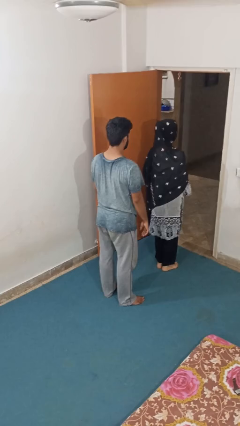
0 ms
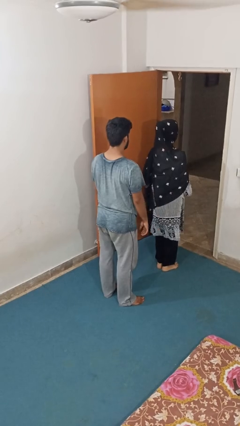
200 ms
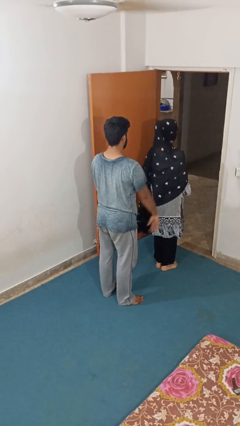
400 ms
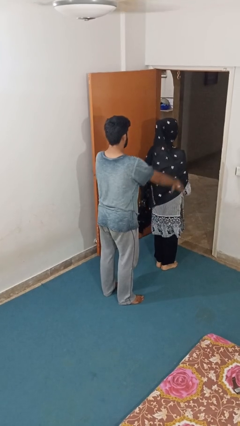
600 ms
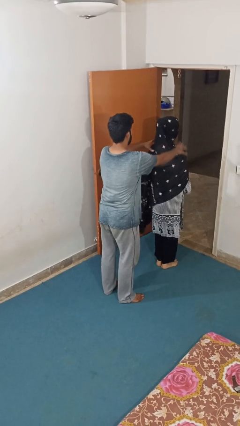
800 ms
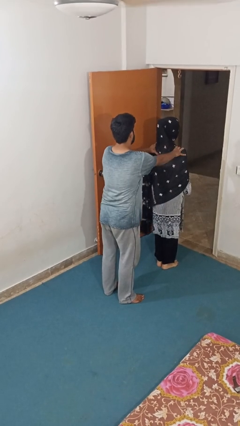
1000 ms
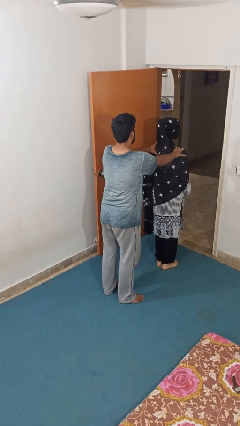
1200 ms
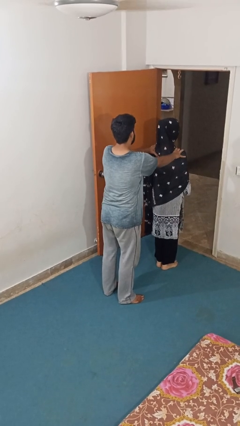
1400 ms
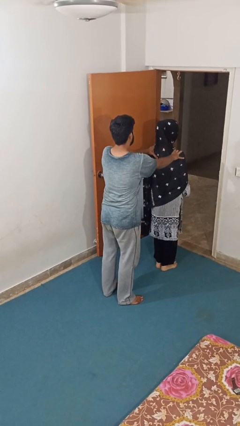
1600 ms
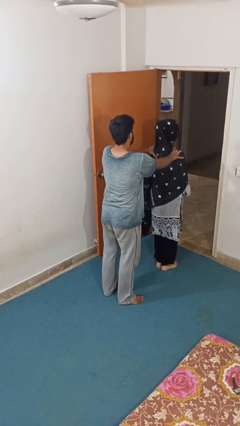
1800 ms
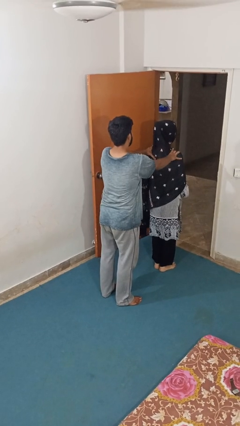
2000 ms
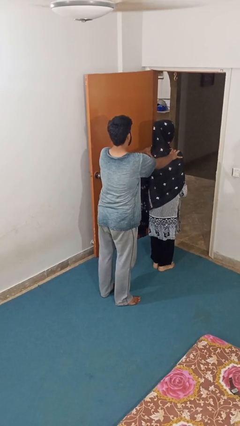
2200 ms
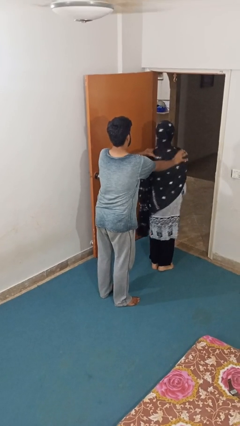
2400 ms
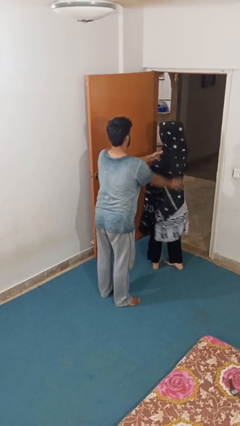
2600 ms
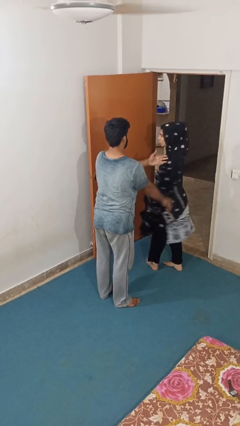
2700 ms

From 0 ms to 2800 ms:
person grabs person by shoulder

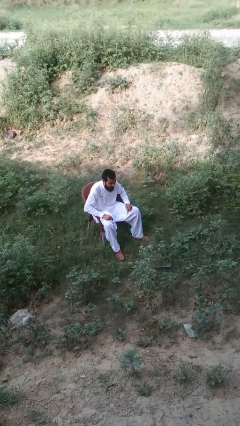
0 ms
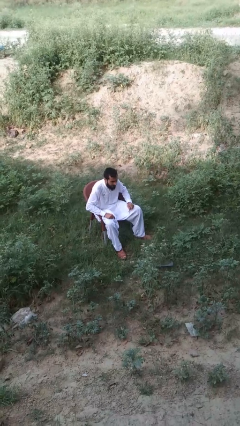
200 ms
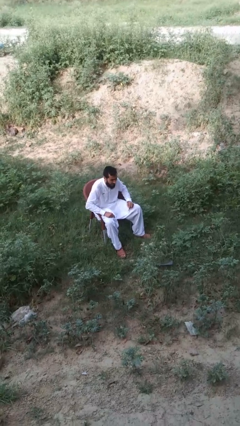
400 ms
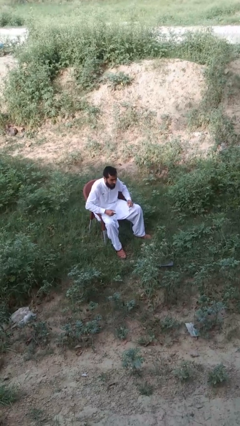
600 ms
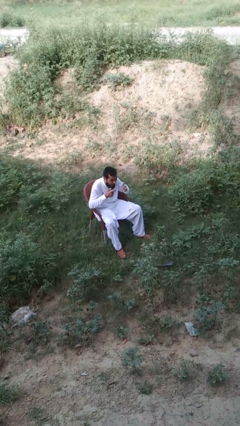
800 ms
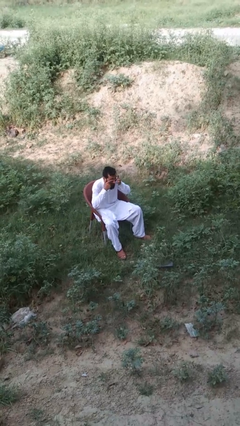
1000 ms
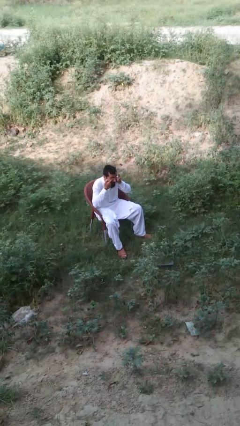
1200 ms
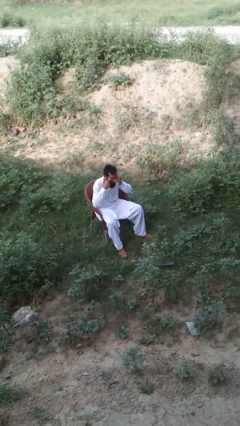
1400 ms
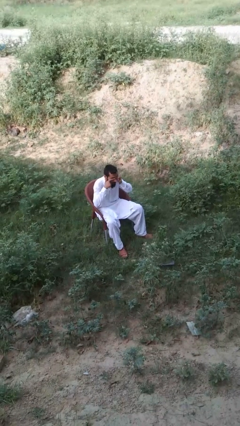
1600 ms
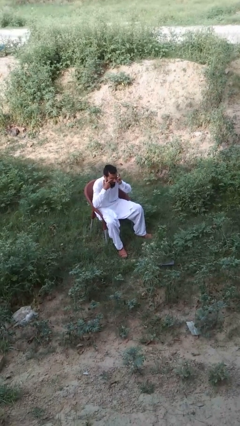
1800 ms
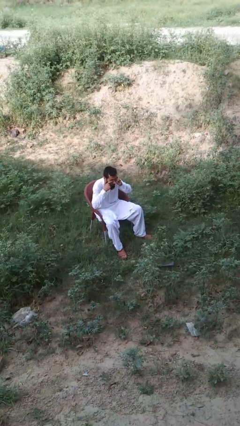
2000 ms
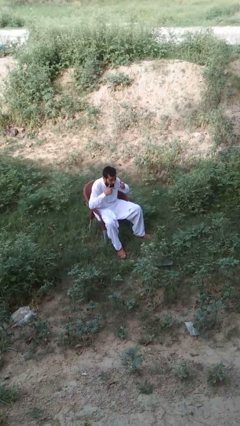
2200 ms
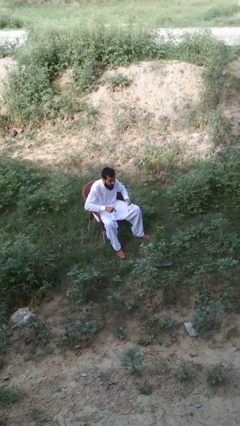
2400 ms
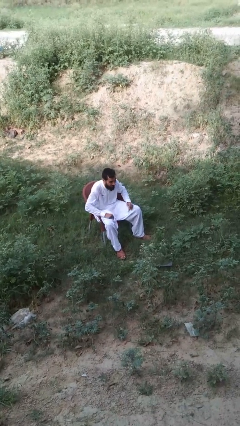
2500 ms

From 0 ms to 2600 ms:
person rubs eyes

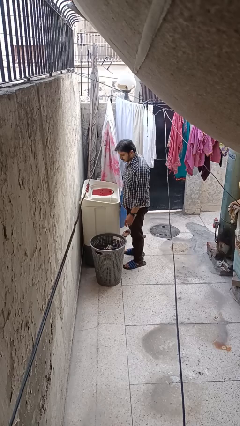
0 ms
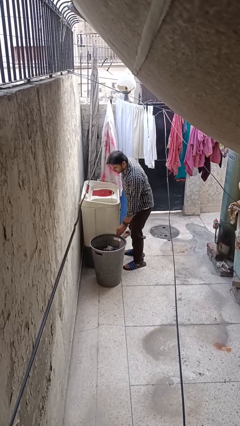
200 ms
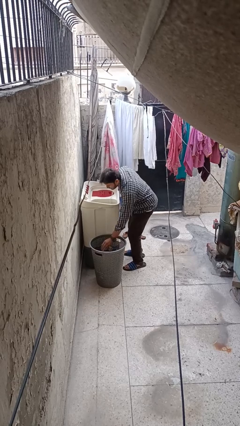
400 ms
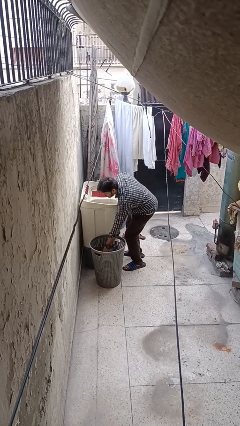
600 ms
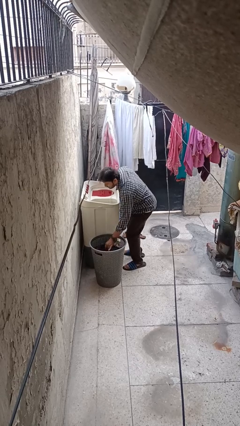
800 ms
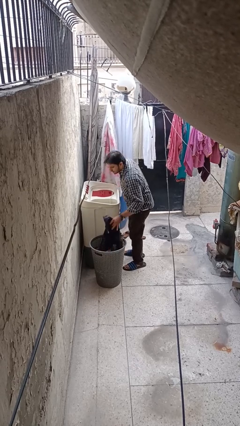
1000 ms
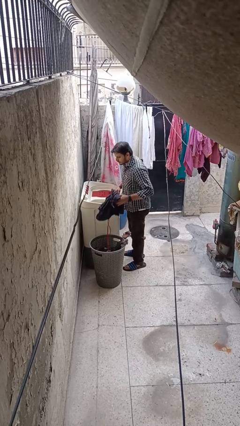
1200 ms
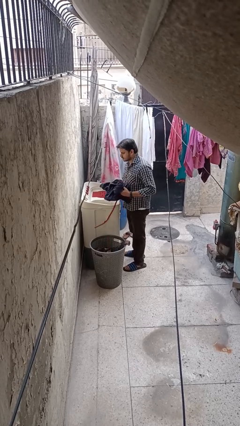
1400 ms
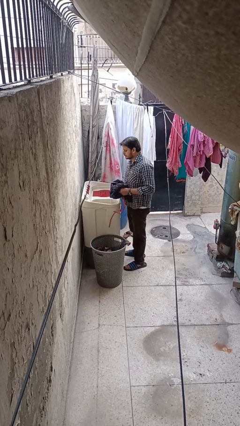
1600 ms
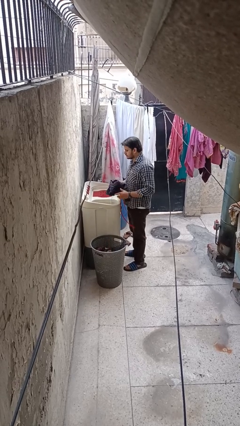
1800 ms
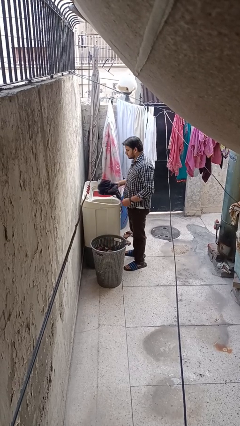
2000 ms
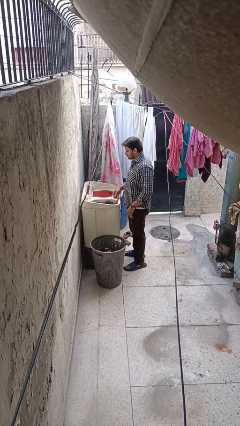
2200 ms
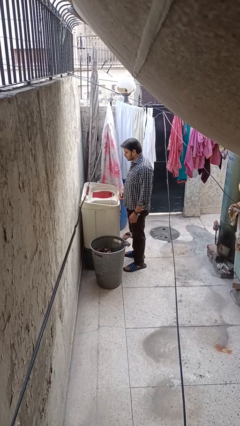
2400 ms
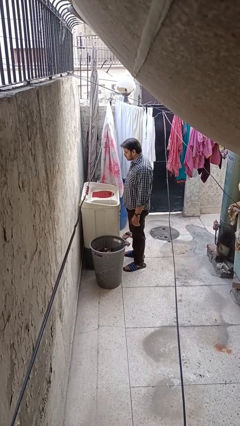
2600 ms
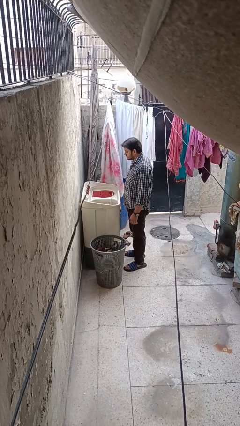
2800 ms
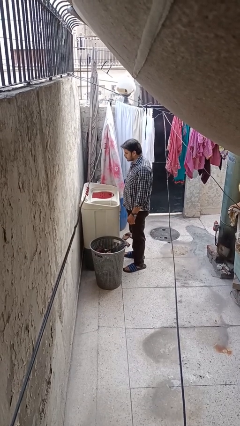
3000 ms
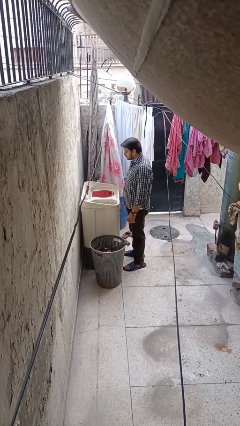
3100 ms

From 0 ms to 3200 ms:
person unloads clotheswasher

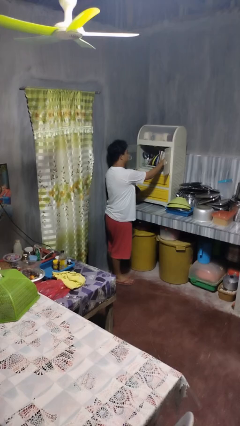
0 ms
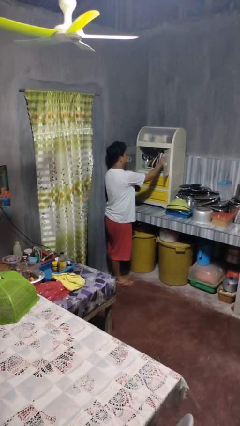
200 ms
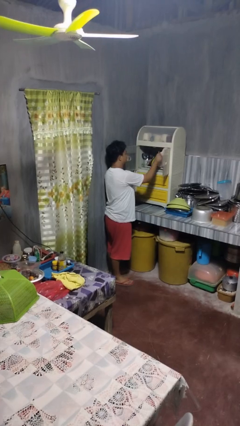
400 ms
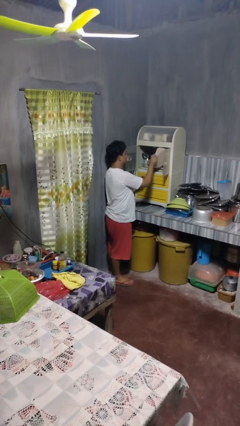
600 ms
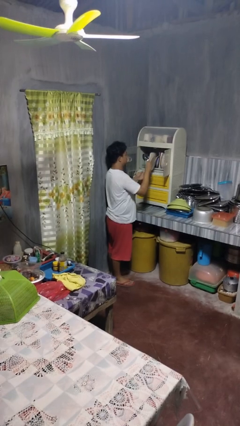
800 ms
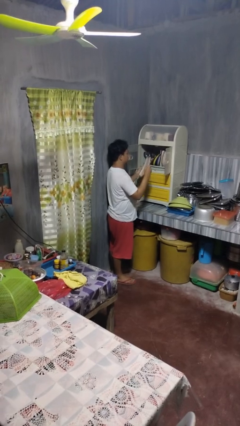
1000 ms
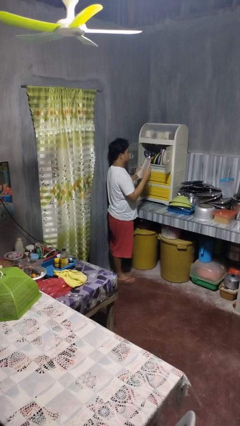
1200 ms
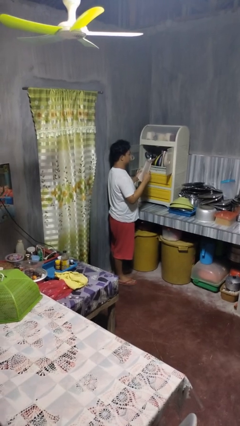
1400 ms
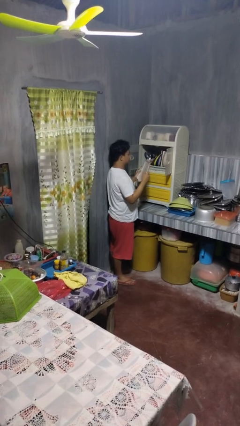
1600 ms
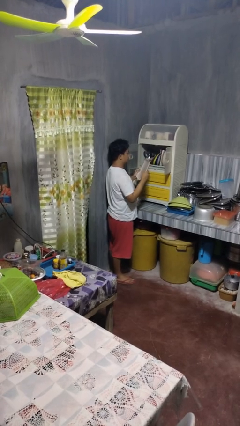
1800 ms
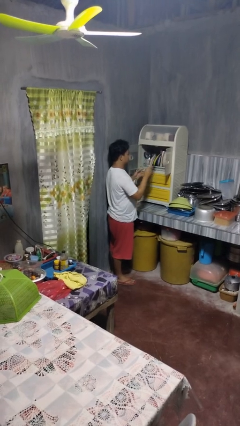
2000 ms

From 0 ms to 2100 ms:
person picks up object from cabinet

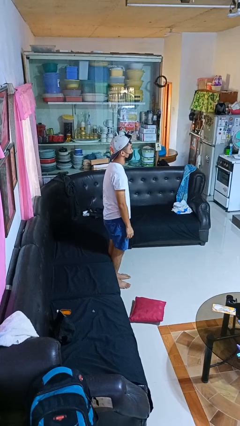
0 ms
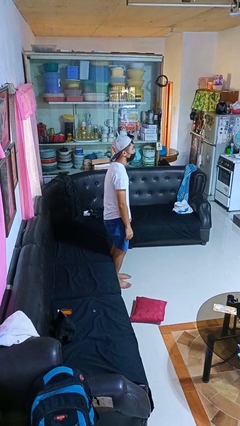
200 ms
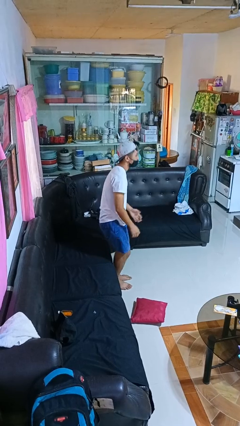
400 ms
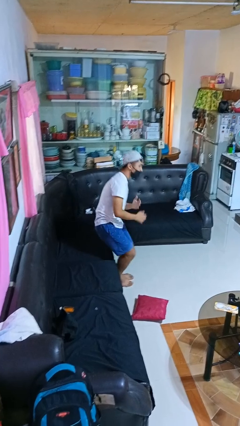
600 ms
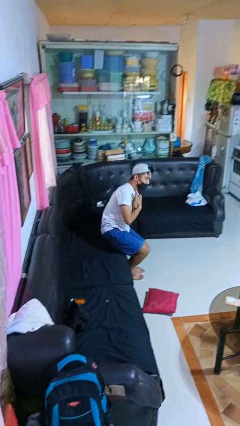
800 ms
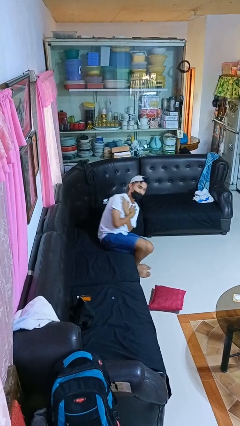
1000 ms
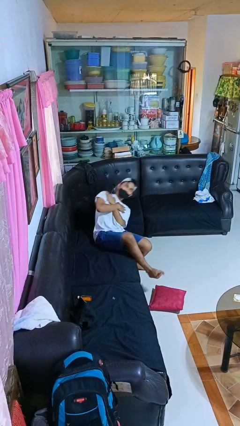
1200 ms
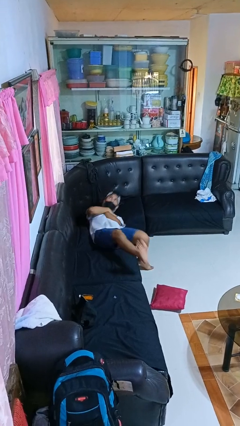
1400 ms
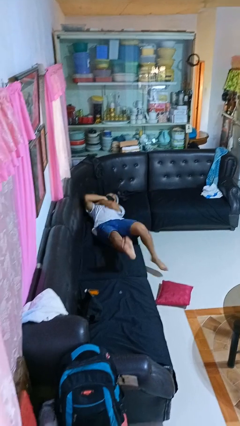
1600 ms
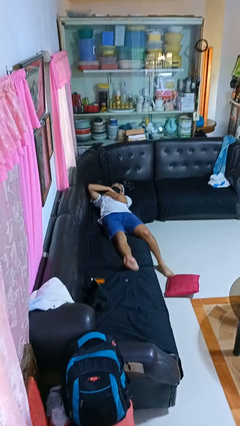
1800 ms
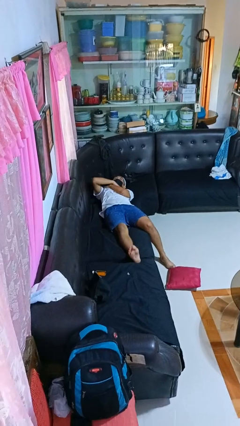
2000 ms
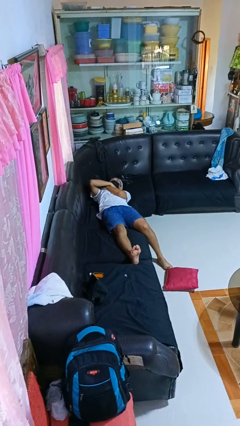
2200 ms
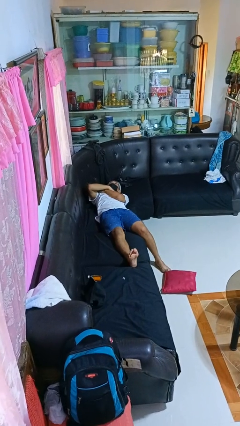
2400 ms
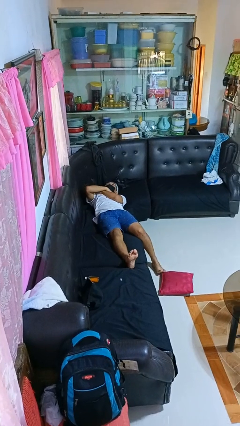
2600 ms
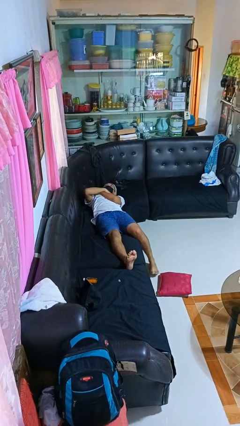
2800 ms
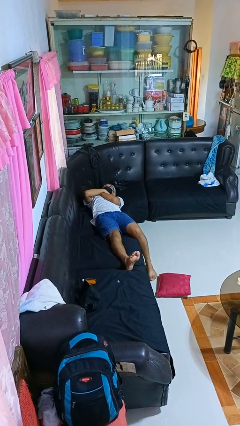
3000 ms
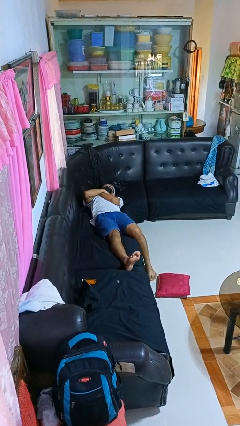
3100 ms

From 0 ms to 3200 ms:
person lies down on couch

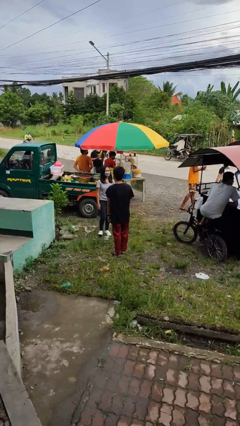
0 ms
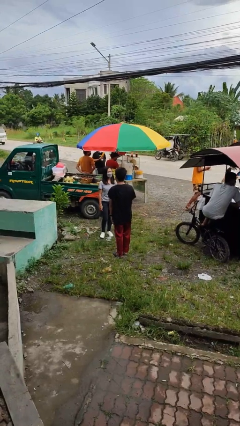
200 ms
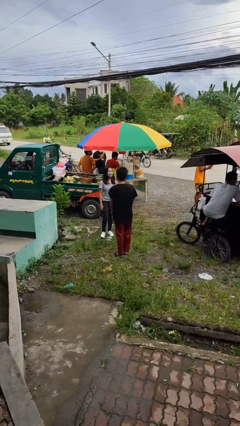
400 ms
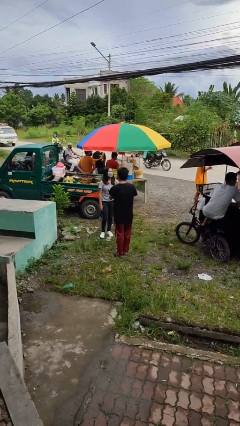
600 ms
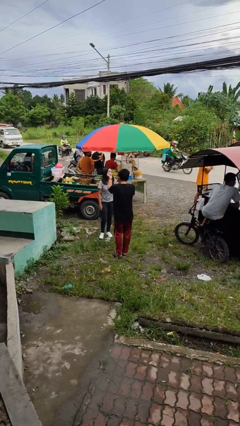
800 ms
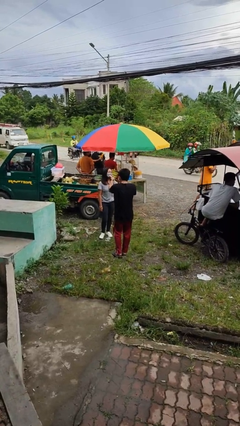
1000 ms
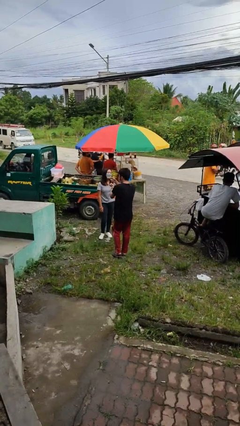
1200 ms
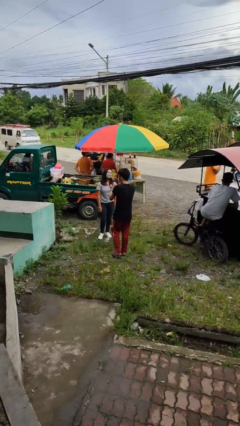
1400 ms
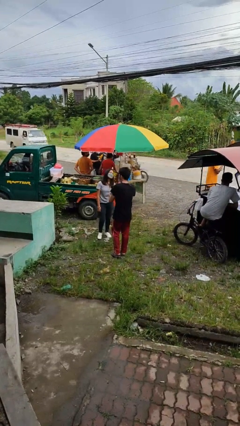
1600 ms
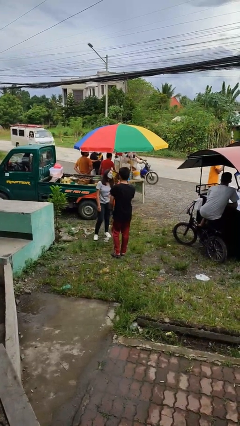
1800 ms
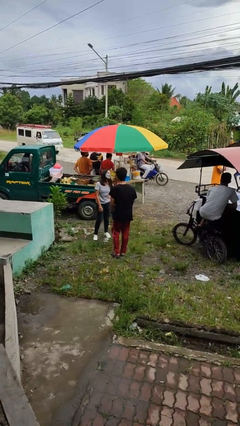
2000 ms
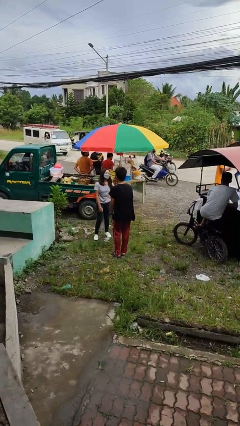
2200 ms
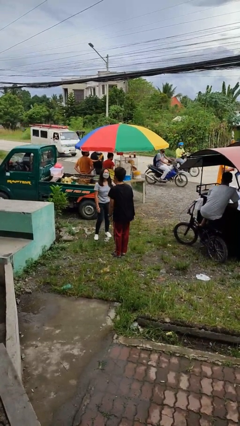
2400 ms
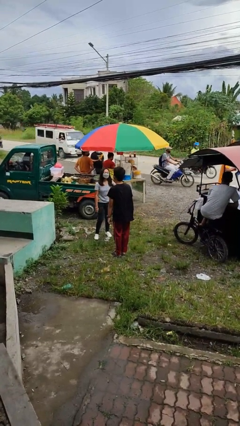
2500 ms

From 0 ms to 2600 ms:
person talks to person

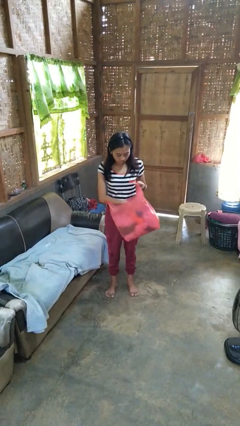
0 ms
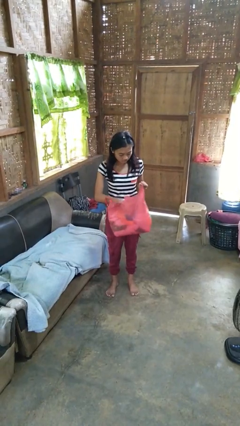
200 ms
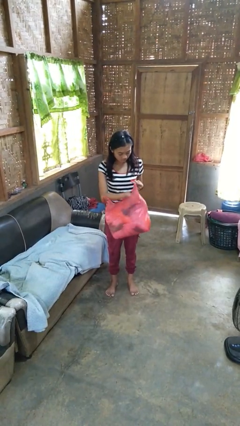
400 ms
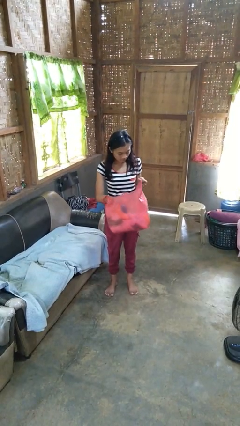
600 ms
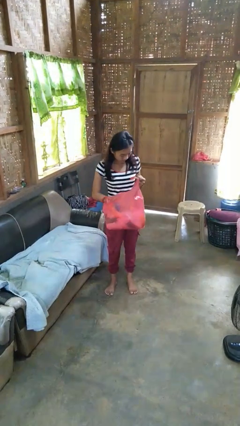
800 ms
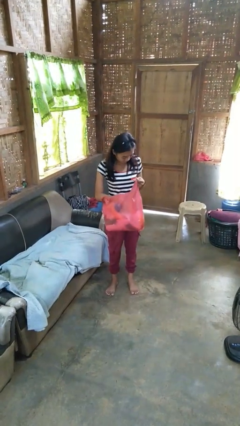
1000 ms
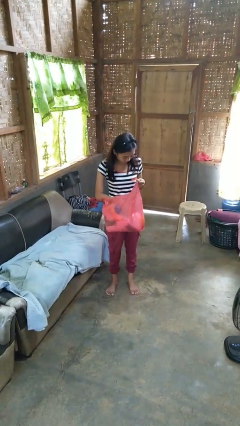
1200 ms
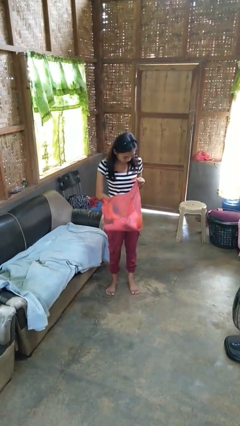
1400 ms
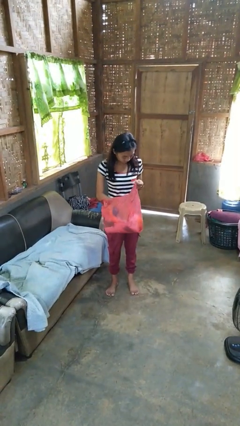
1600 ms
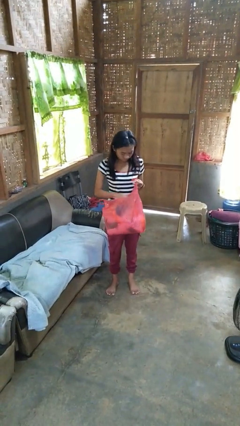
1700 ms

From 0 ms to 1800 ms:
person searches in bag
